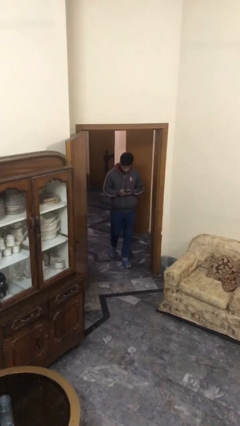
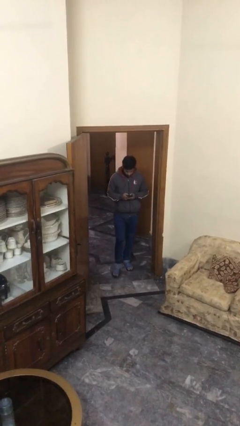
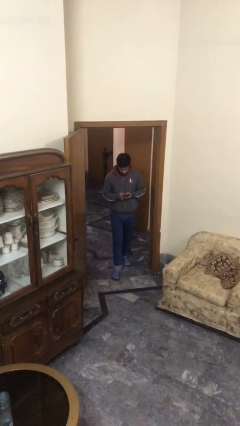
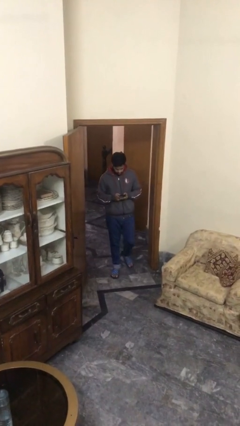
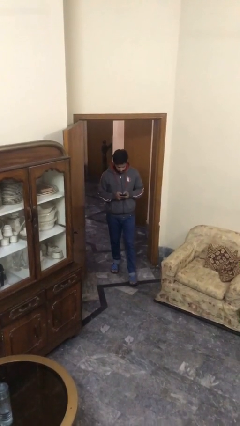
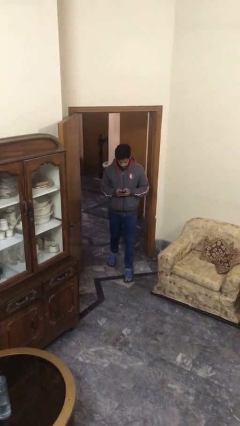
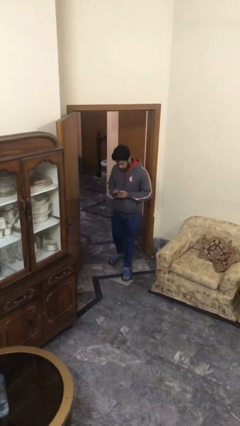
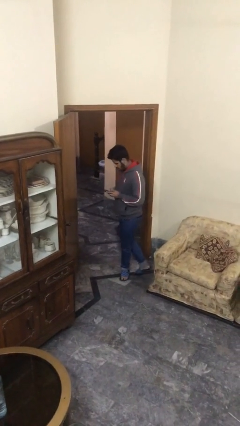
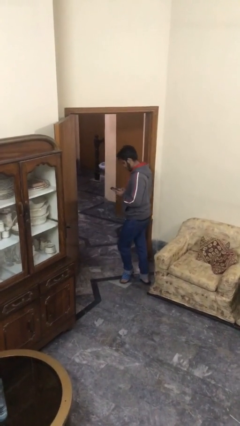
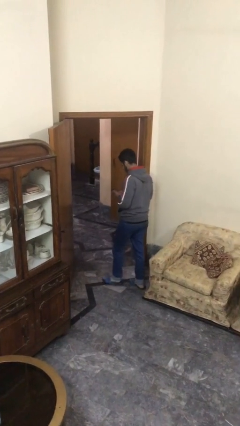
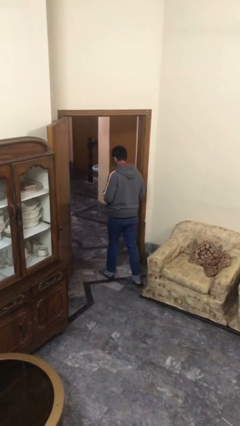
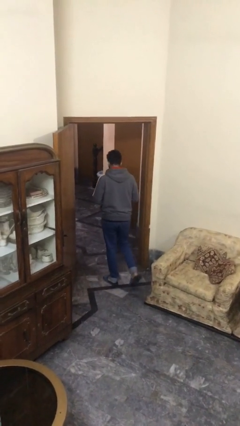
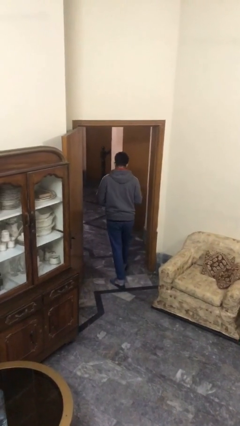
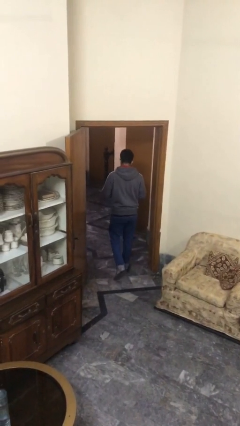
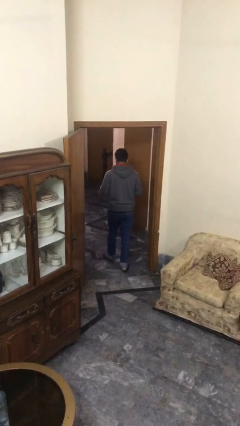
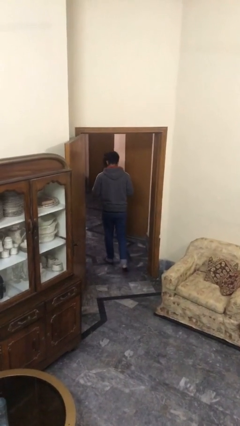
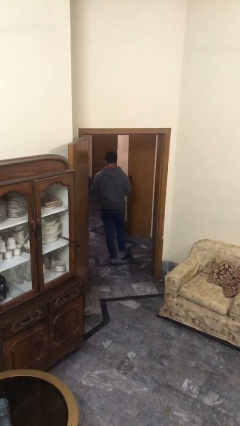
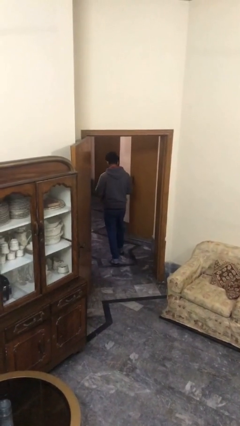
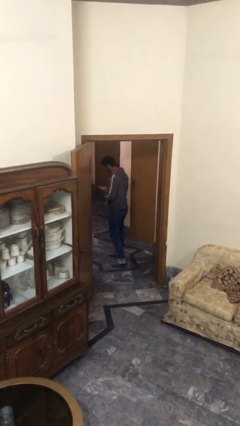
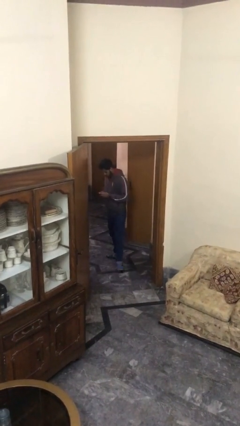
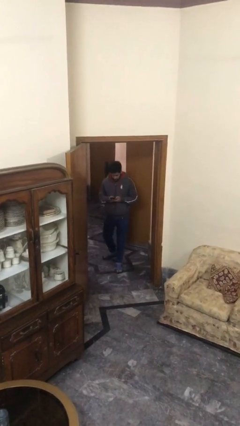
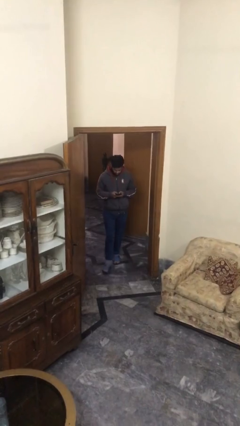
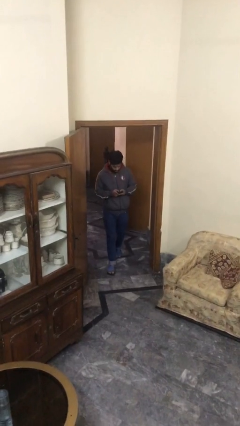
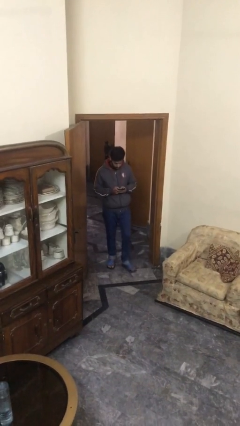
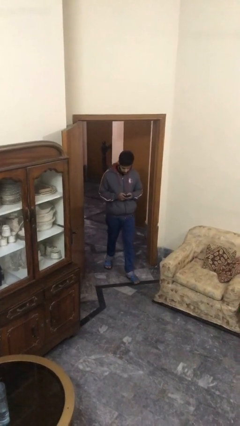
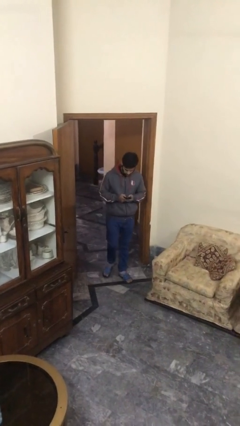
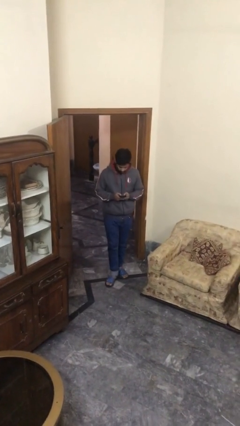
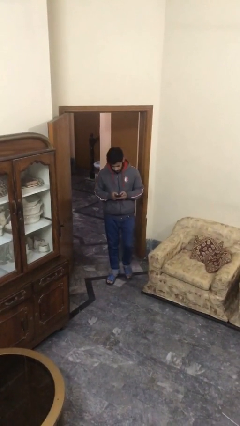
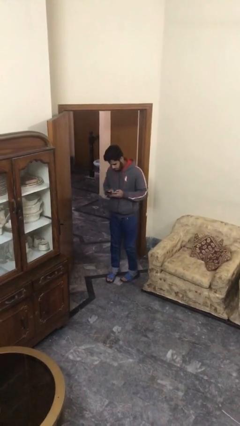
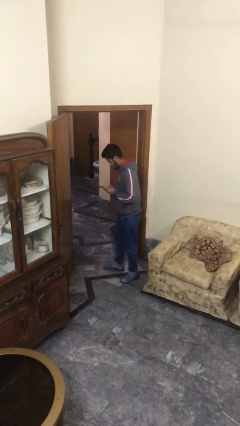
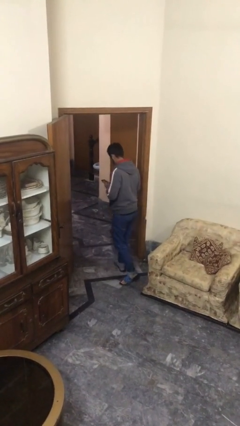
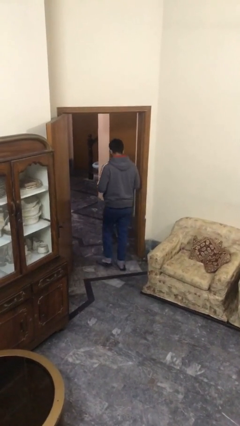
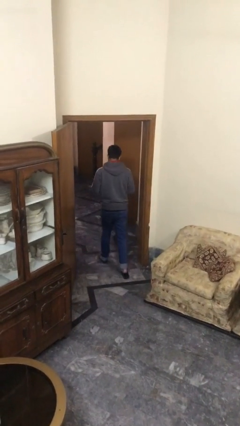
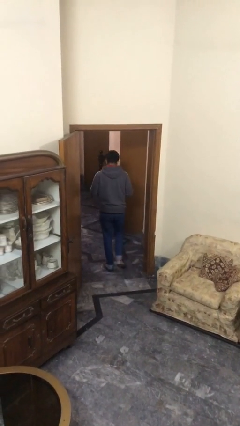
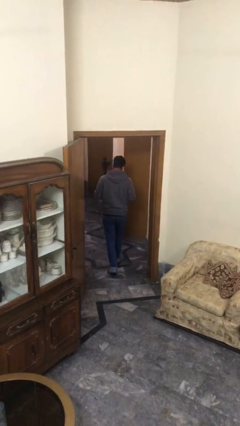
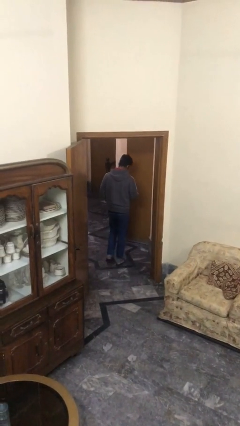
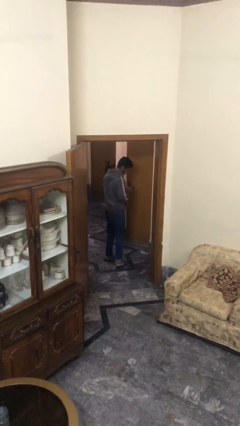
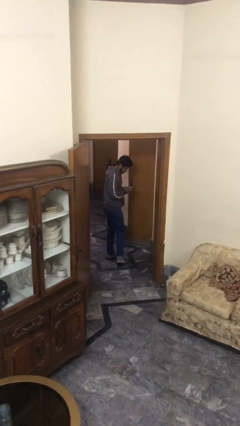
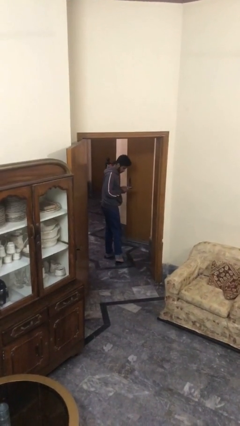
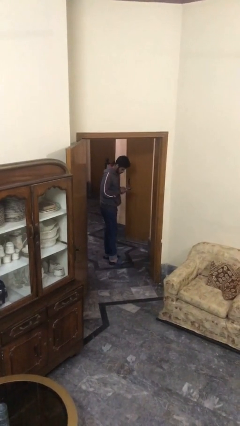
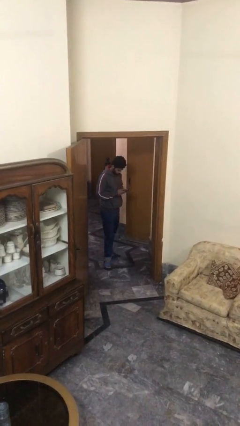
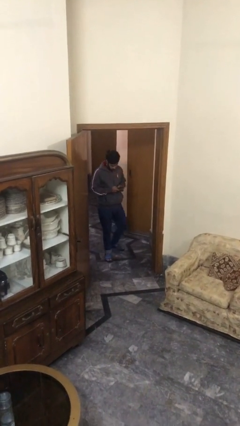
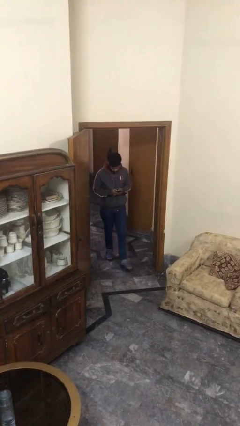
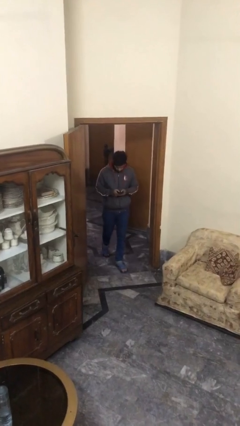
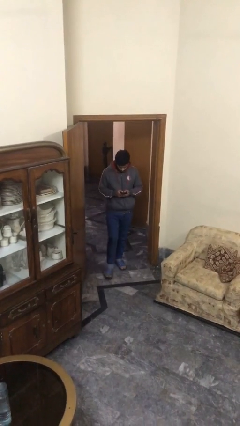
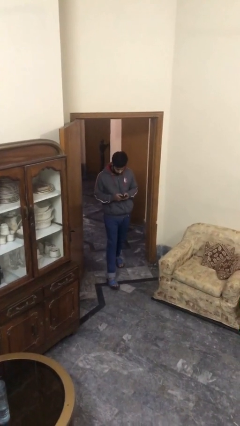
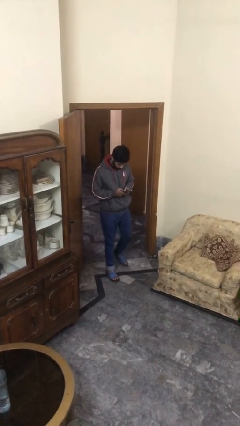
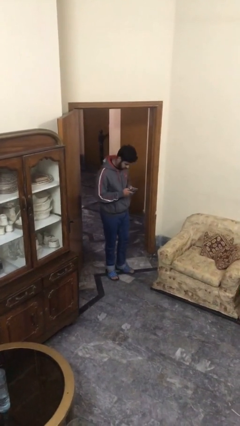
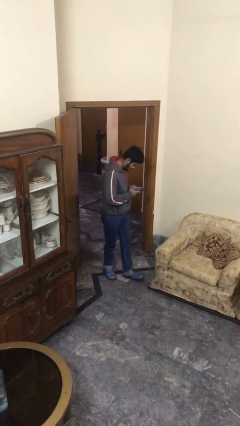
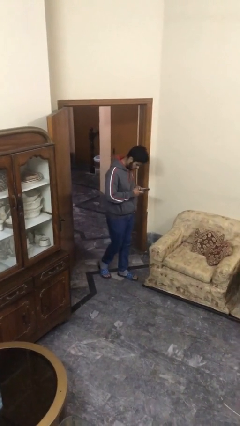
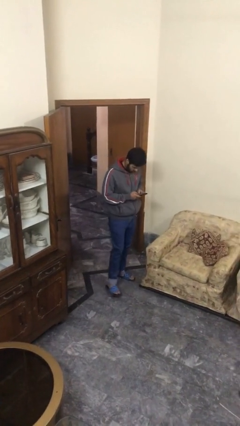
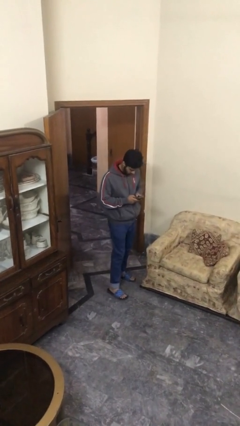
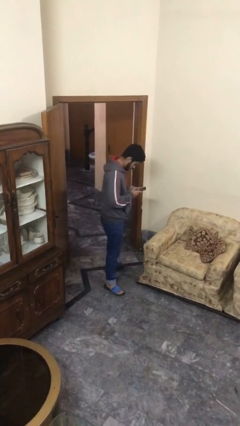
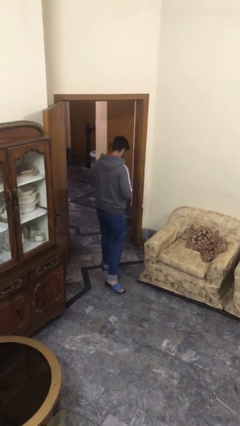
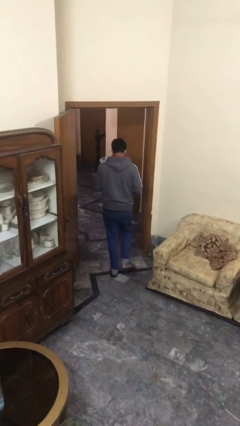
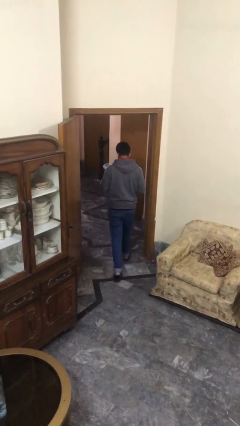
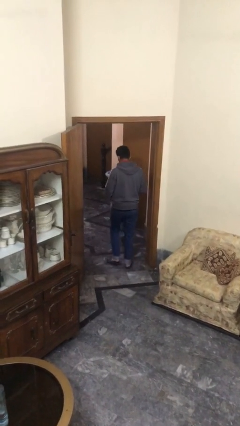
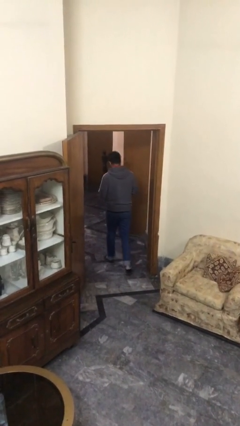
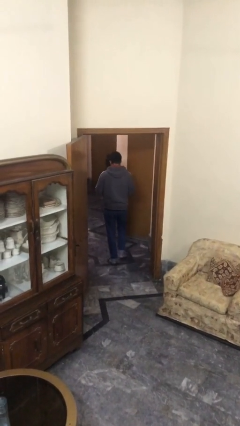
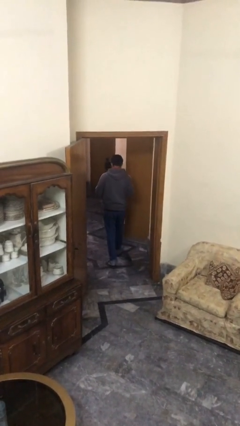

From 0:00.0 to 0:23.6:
person texts on phone

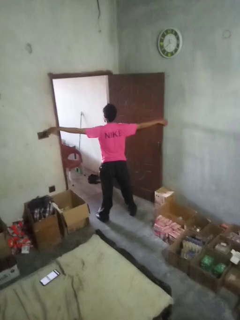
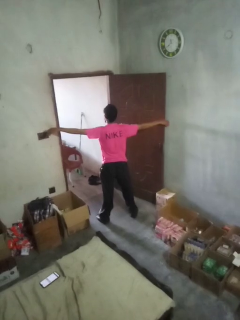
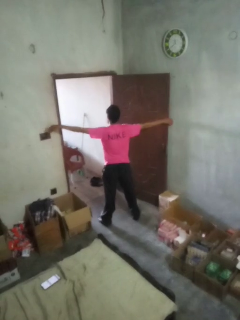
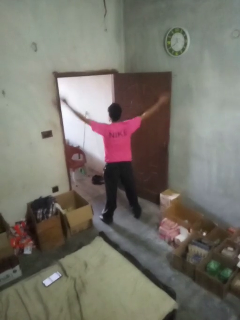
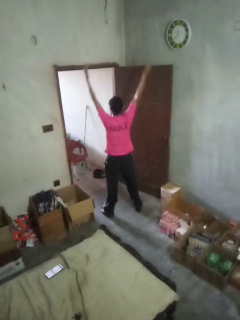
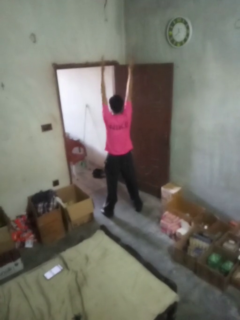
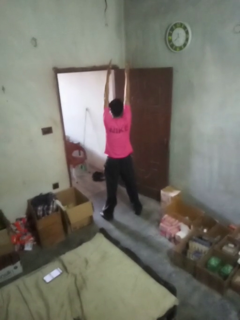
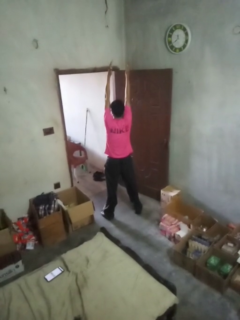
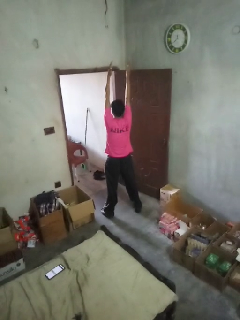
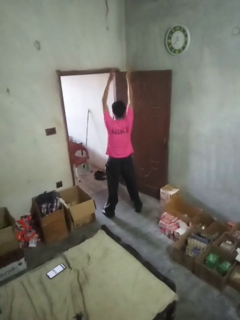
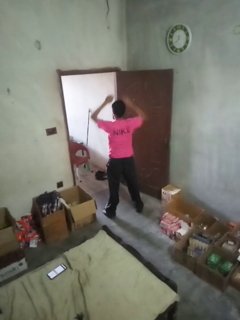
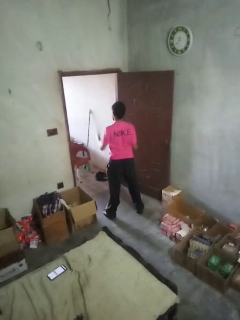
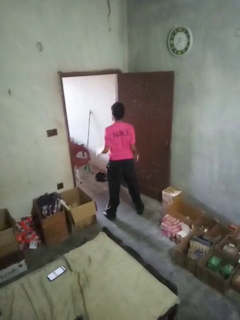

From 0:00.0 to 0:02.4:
person stretches arms over head

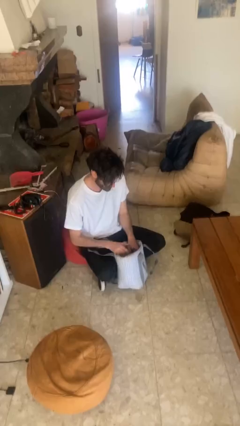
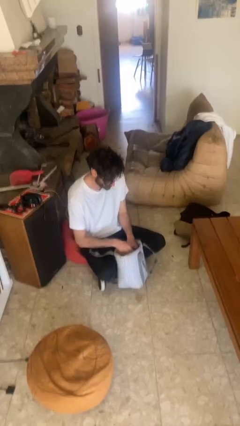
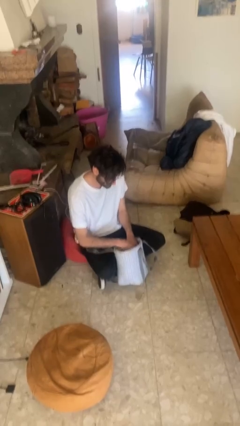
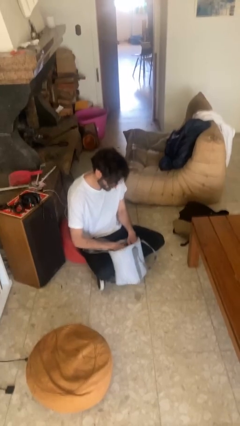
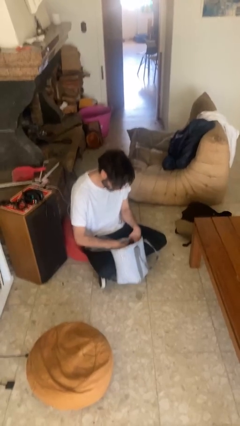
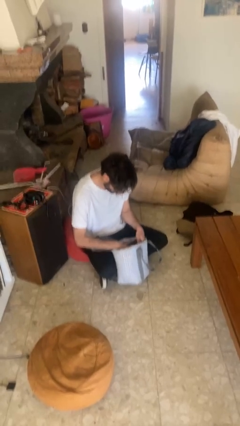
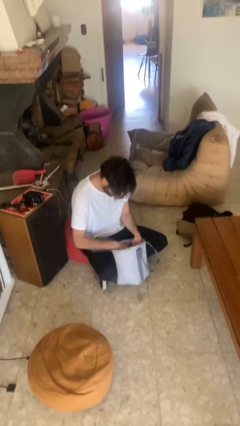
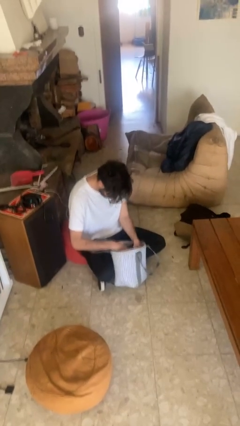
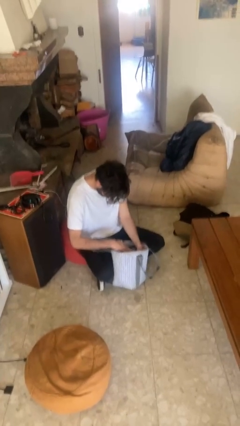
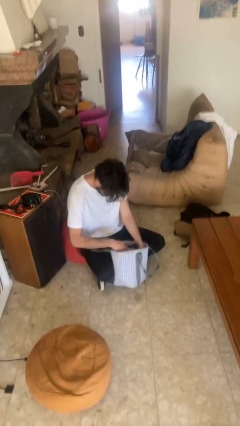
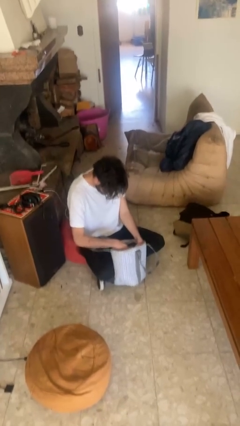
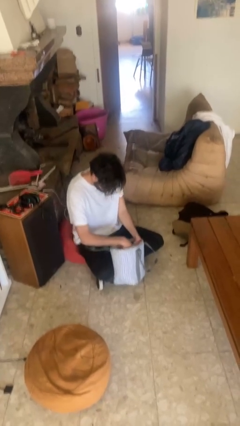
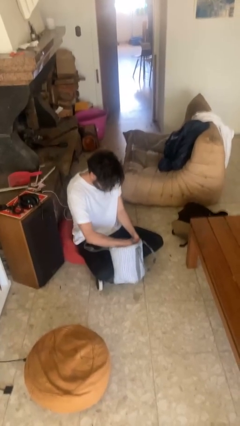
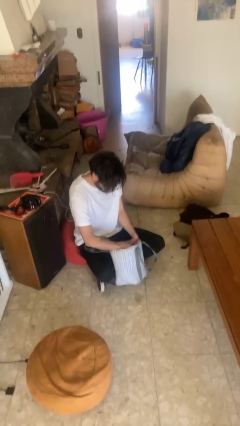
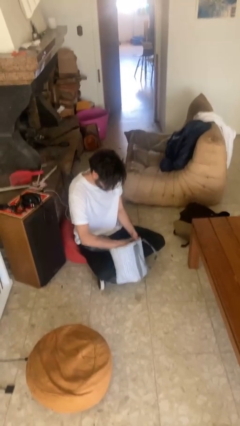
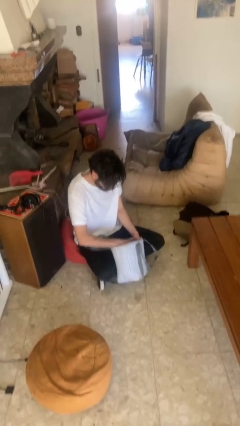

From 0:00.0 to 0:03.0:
person searches in purse

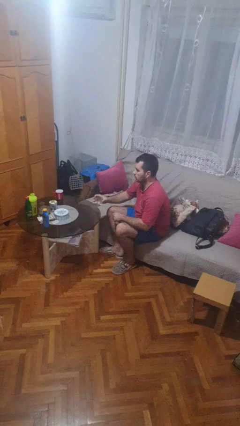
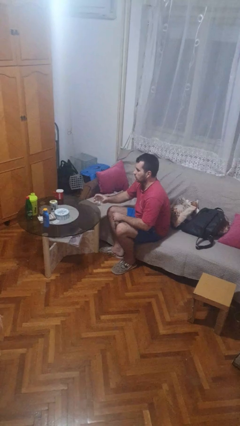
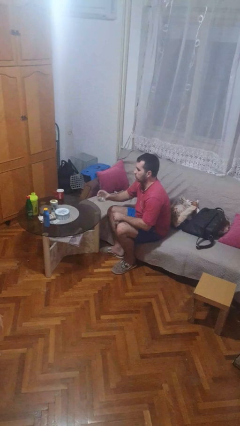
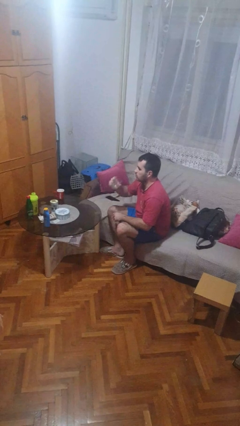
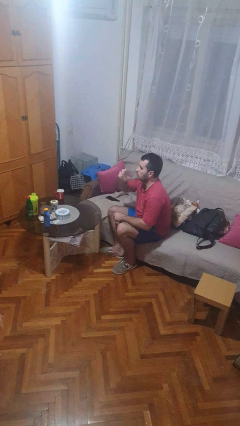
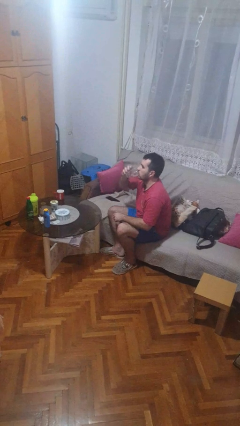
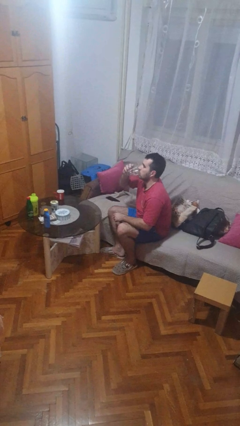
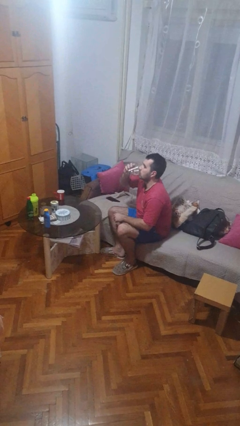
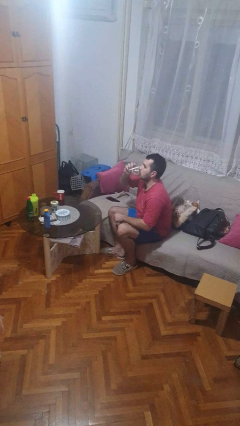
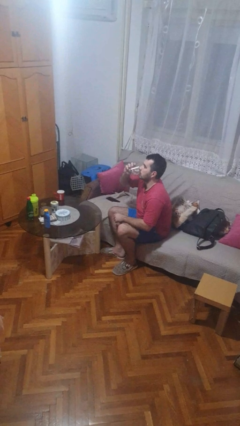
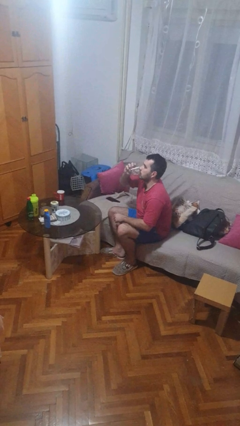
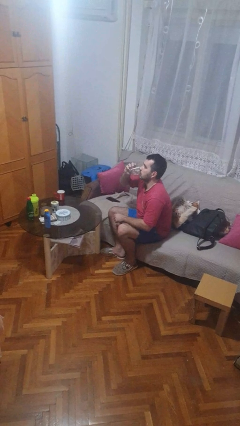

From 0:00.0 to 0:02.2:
person drinks from shotglass
